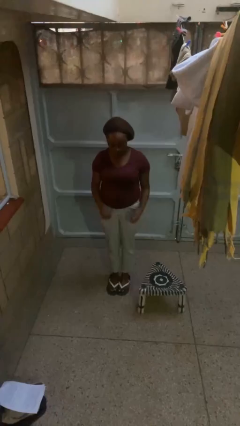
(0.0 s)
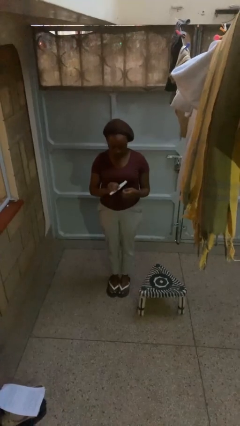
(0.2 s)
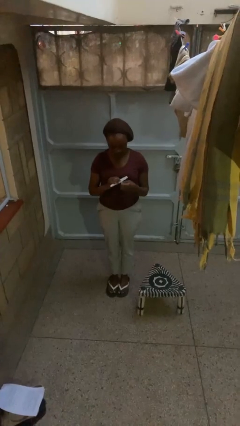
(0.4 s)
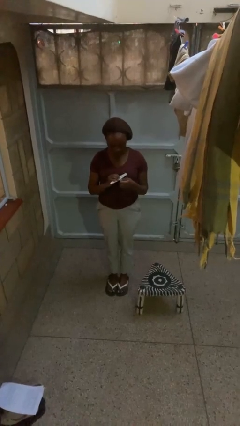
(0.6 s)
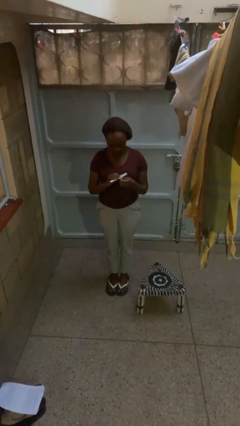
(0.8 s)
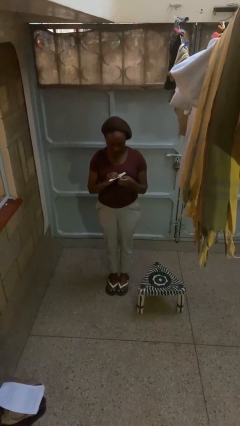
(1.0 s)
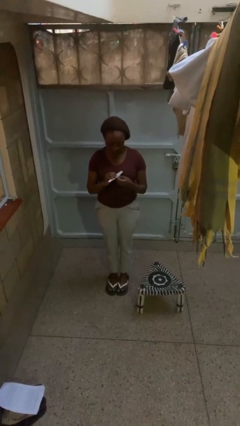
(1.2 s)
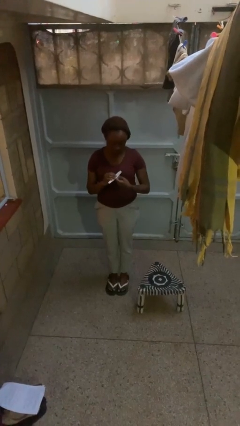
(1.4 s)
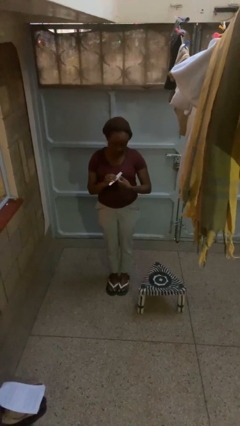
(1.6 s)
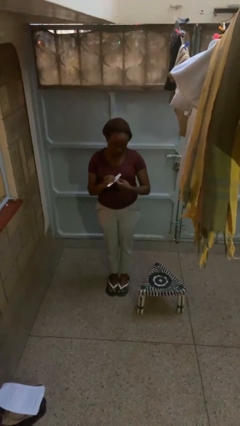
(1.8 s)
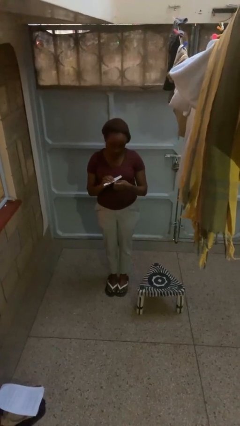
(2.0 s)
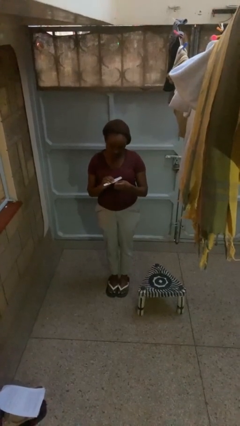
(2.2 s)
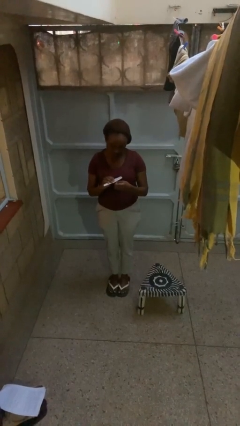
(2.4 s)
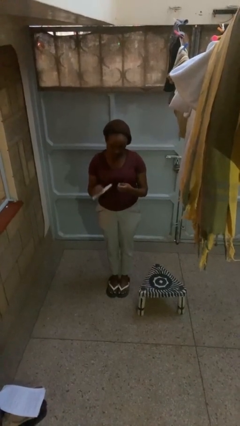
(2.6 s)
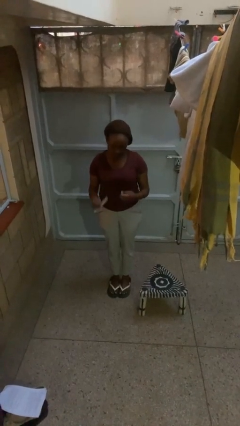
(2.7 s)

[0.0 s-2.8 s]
person files fingernails

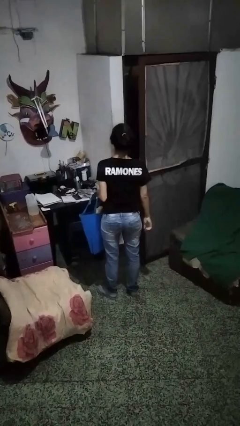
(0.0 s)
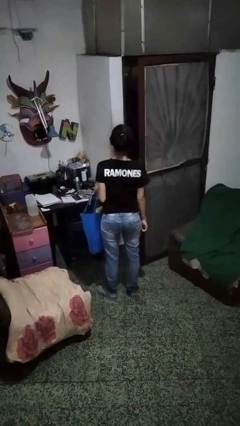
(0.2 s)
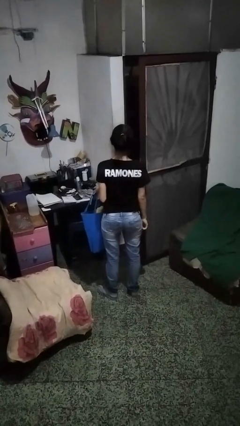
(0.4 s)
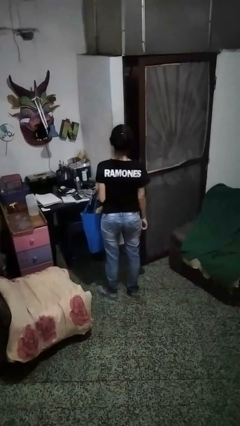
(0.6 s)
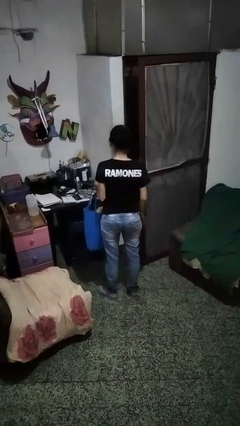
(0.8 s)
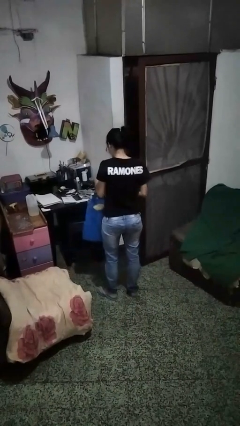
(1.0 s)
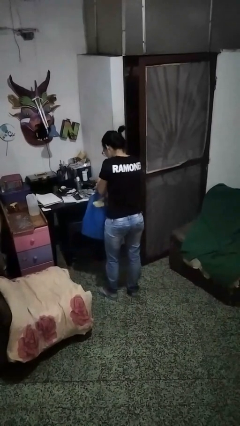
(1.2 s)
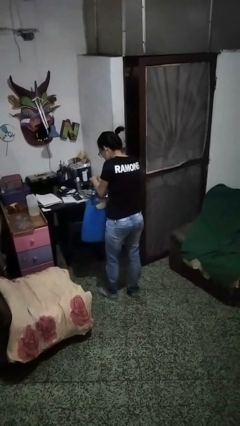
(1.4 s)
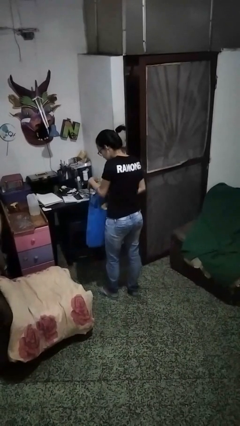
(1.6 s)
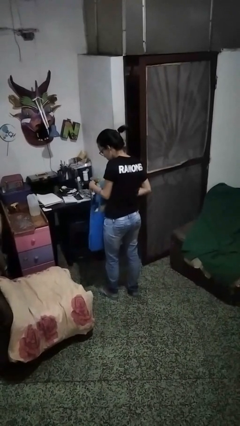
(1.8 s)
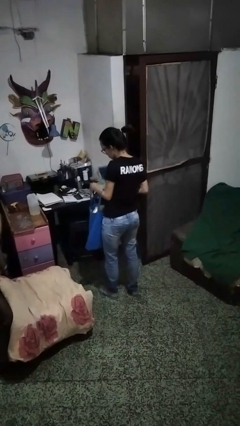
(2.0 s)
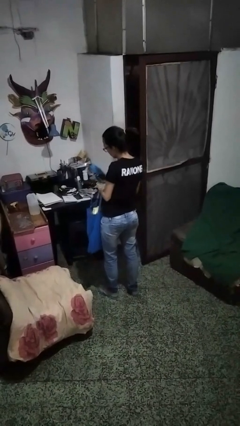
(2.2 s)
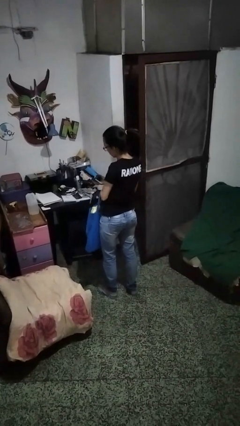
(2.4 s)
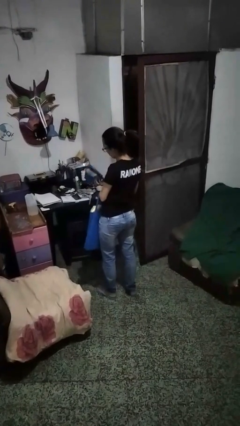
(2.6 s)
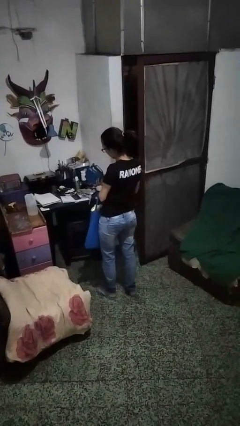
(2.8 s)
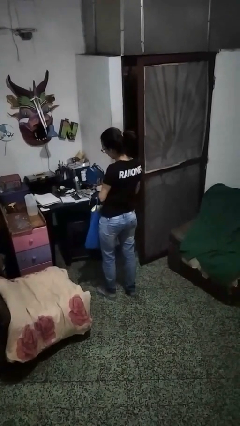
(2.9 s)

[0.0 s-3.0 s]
person takes object from bag

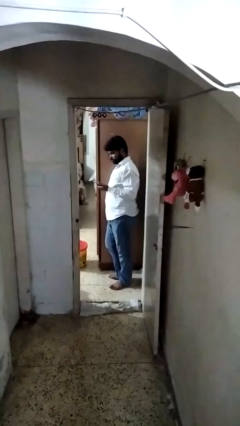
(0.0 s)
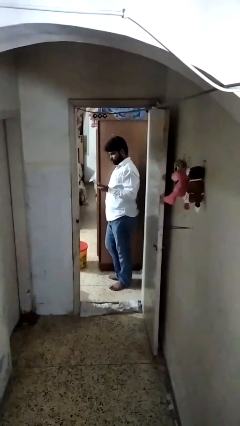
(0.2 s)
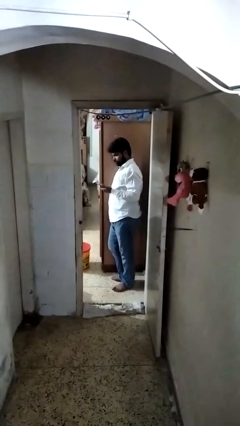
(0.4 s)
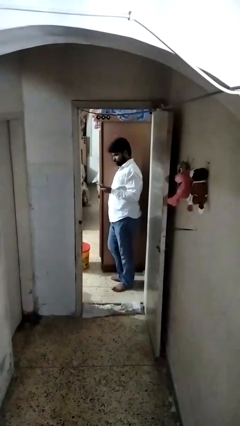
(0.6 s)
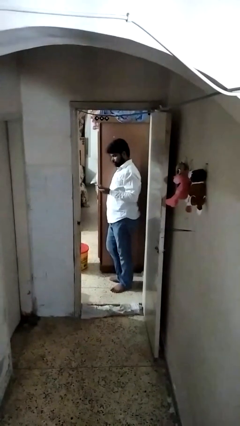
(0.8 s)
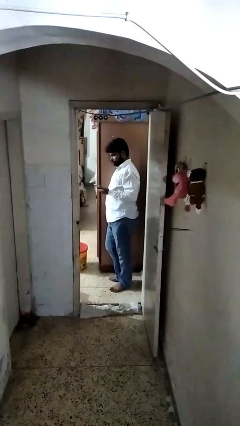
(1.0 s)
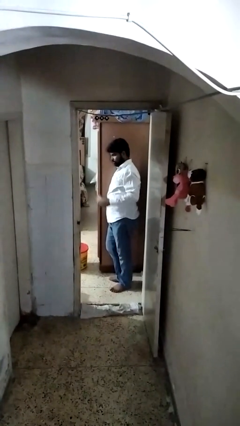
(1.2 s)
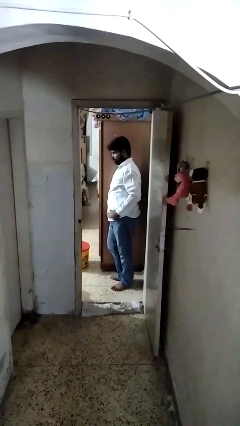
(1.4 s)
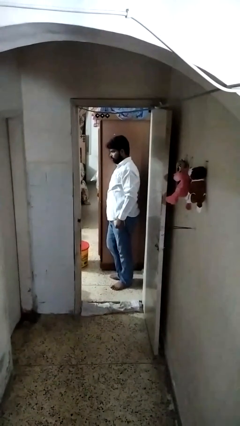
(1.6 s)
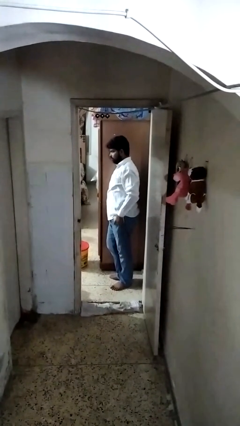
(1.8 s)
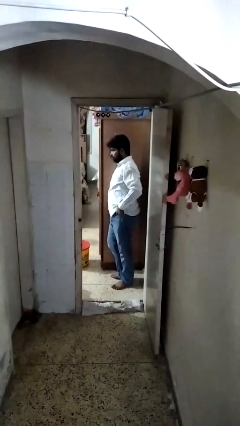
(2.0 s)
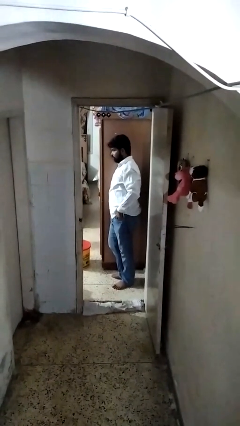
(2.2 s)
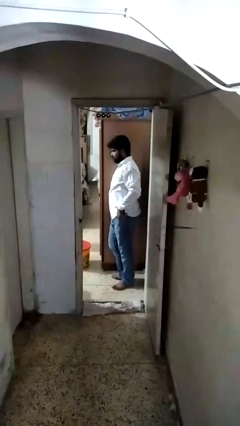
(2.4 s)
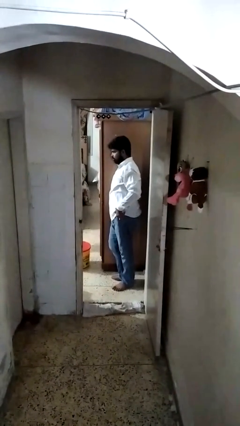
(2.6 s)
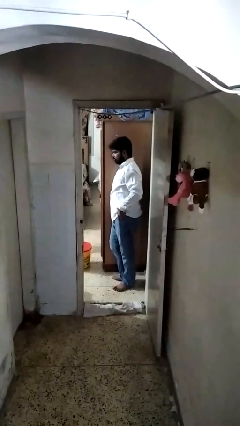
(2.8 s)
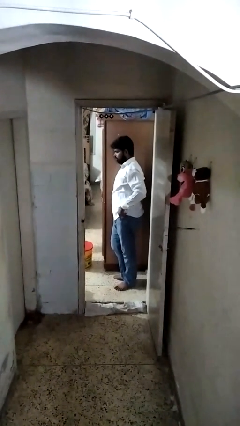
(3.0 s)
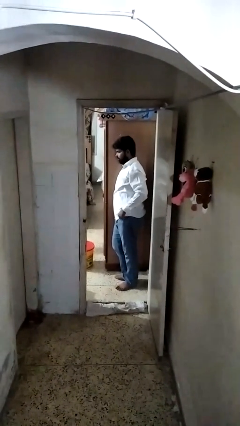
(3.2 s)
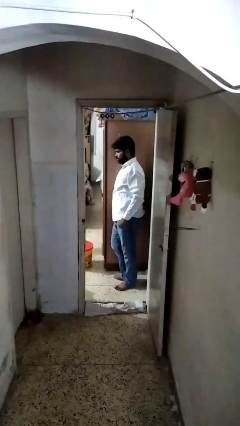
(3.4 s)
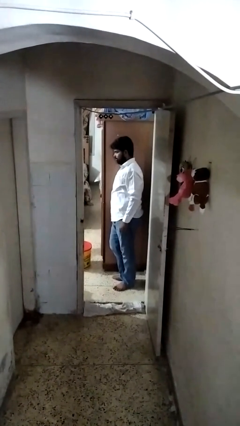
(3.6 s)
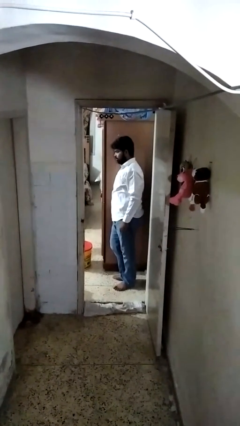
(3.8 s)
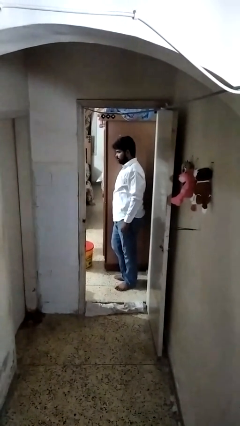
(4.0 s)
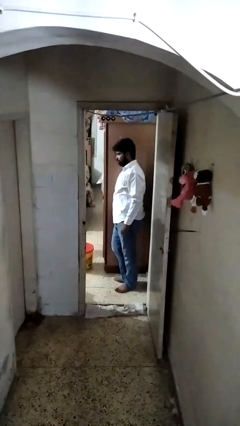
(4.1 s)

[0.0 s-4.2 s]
person puts phone into pocket

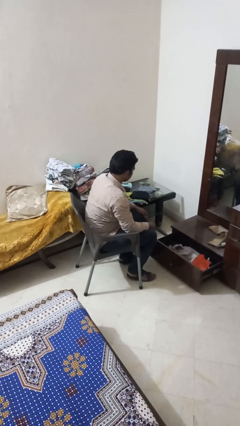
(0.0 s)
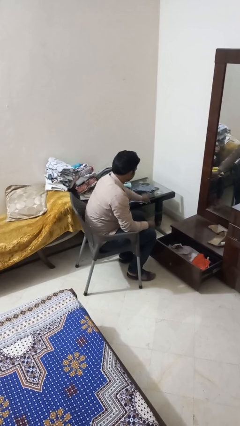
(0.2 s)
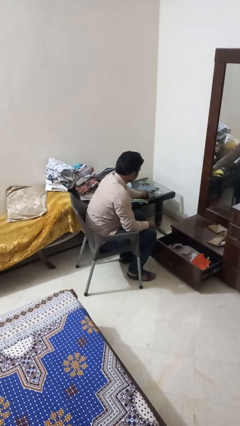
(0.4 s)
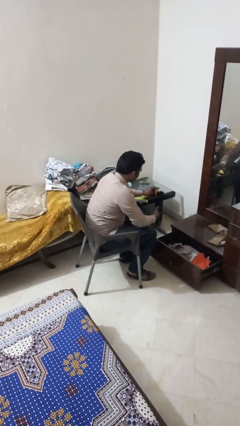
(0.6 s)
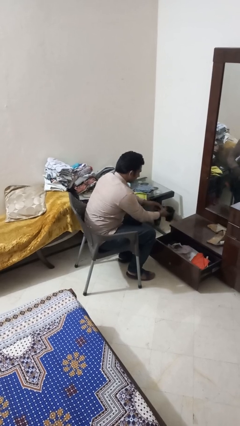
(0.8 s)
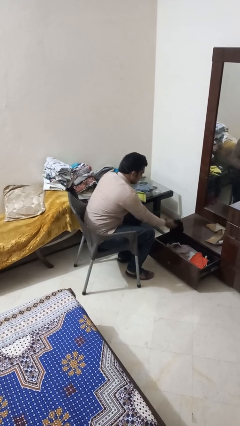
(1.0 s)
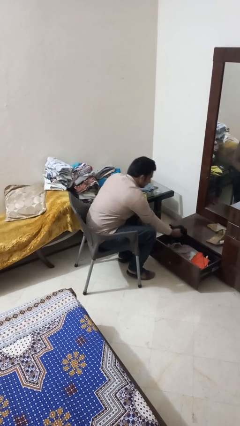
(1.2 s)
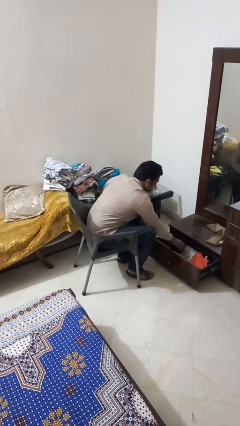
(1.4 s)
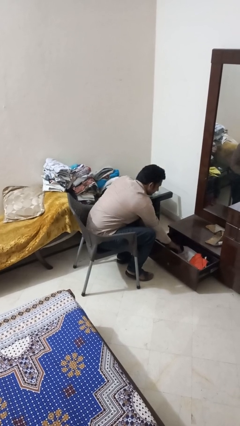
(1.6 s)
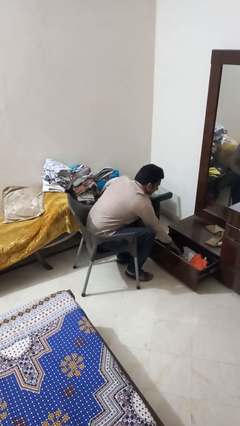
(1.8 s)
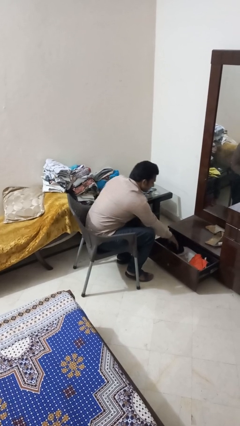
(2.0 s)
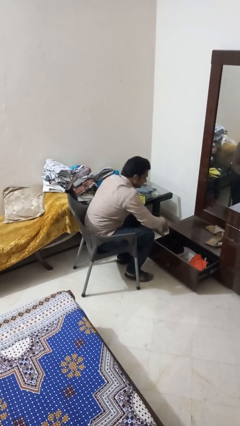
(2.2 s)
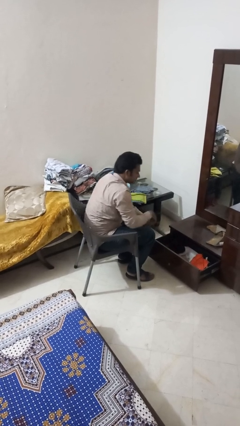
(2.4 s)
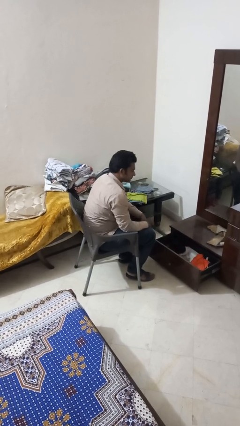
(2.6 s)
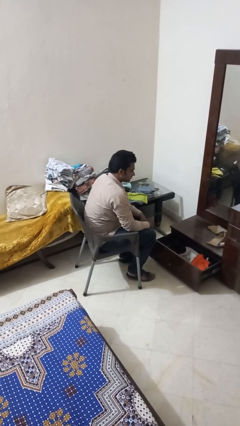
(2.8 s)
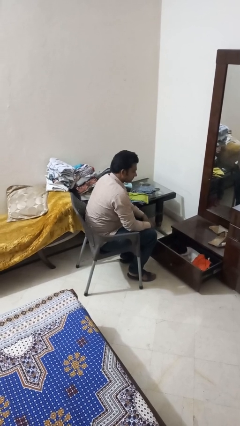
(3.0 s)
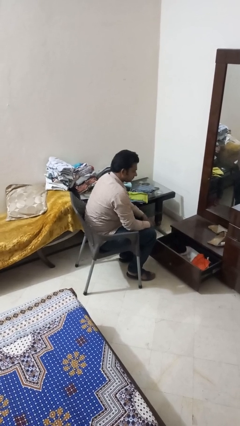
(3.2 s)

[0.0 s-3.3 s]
person puts clothes into dresser

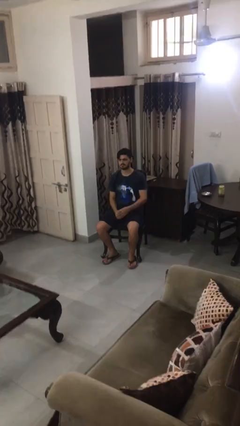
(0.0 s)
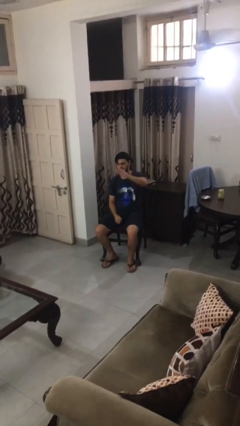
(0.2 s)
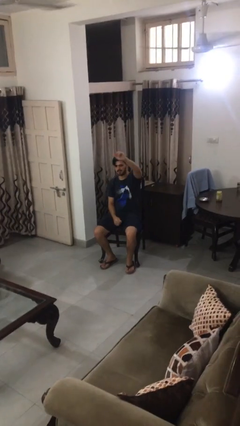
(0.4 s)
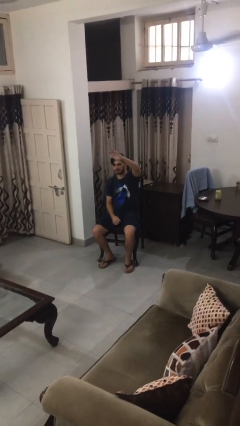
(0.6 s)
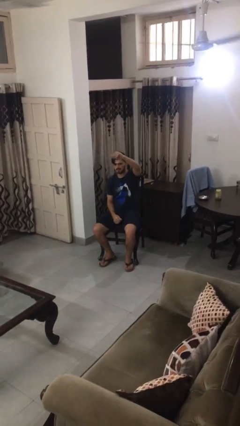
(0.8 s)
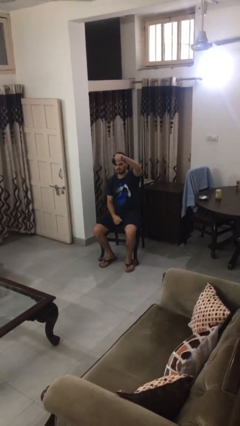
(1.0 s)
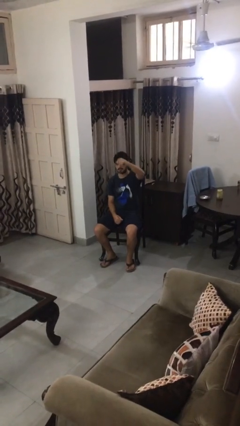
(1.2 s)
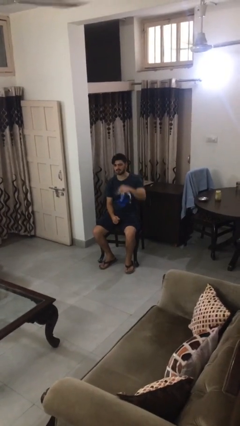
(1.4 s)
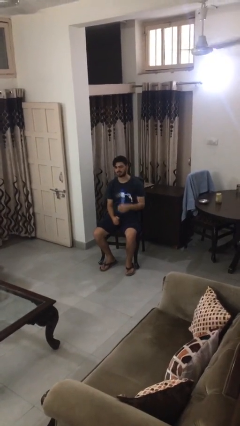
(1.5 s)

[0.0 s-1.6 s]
person gestures come here

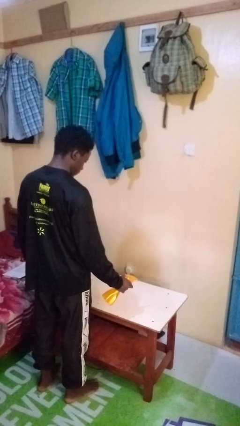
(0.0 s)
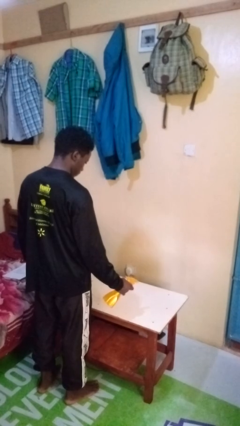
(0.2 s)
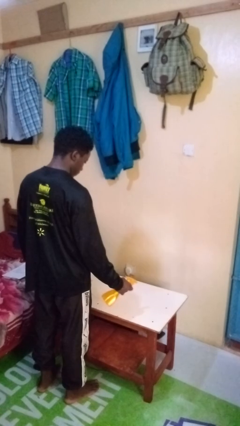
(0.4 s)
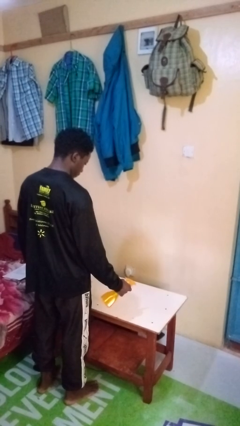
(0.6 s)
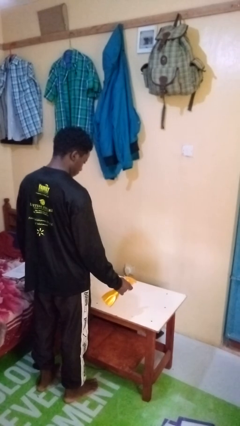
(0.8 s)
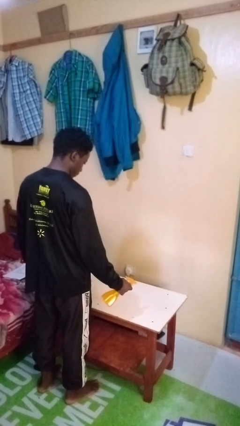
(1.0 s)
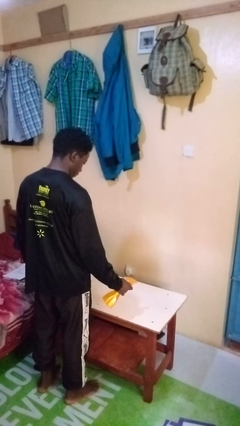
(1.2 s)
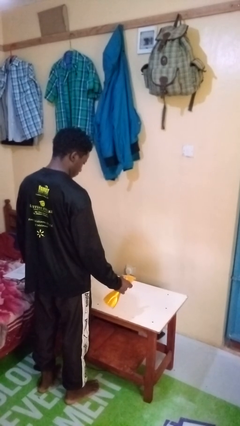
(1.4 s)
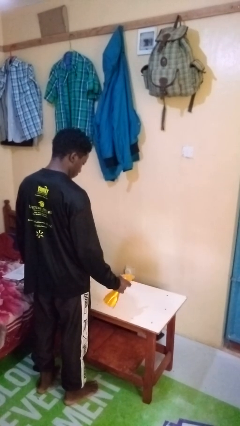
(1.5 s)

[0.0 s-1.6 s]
person sprays from bottle

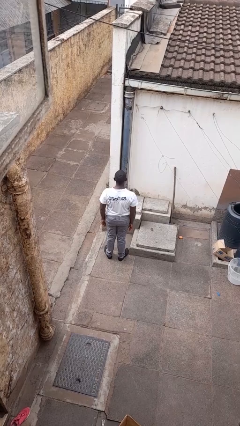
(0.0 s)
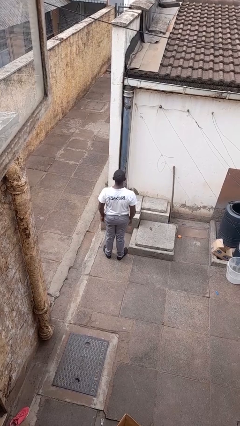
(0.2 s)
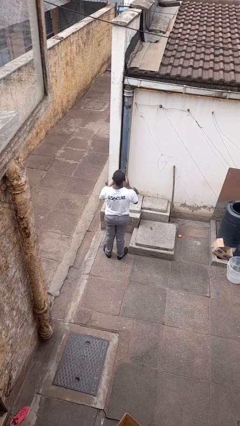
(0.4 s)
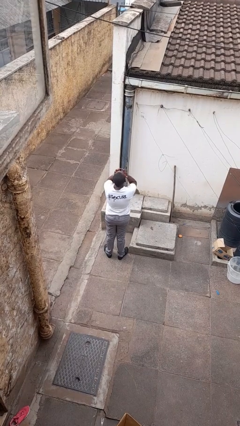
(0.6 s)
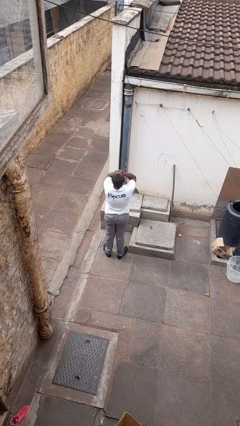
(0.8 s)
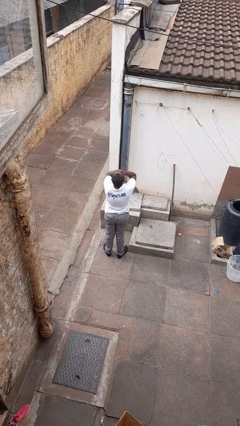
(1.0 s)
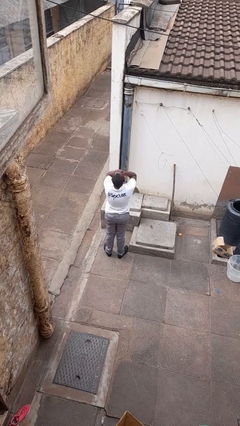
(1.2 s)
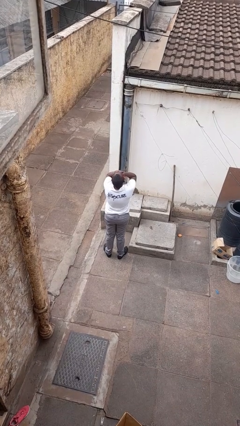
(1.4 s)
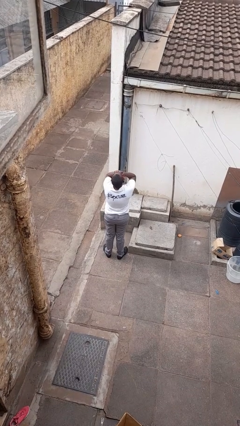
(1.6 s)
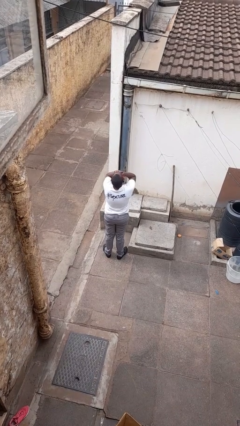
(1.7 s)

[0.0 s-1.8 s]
person covers face with hands
